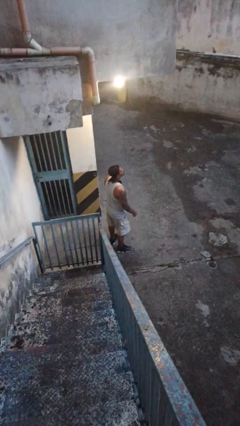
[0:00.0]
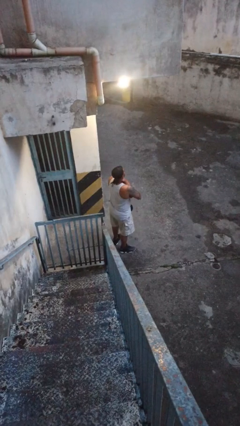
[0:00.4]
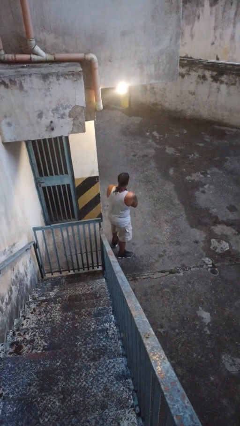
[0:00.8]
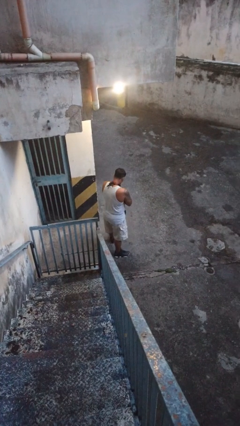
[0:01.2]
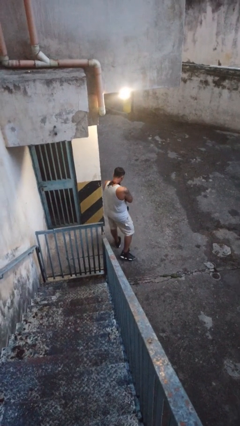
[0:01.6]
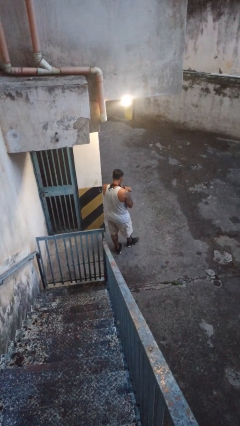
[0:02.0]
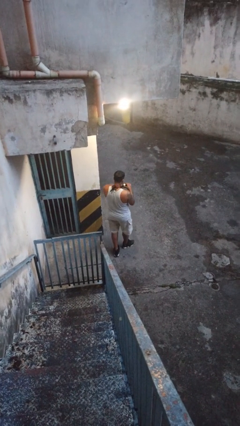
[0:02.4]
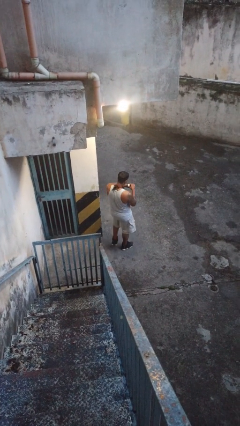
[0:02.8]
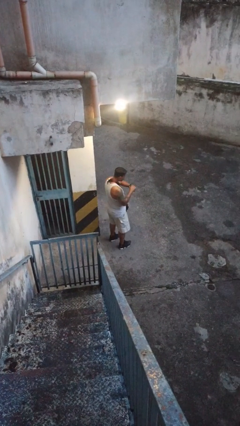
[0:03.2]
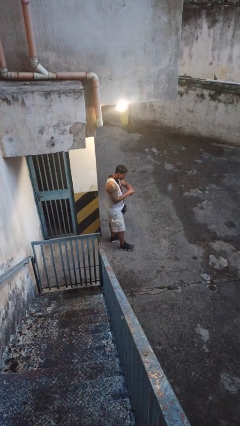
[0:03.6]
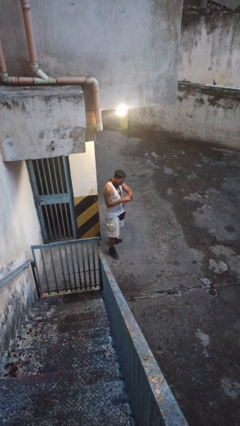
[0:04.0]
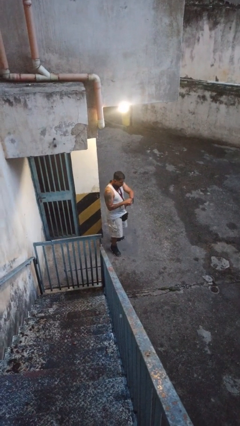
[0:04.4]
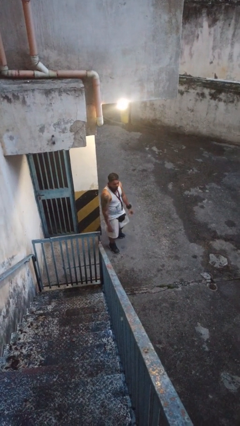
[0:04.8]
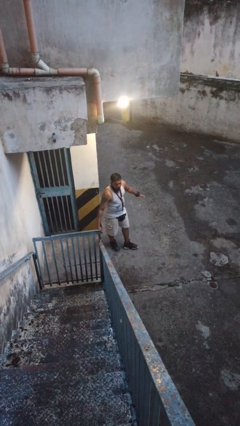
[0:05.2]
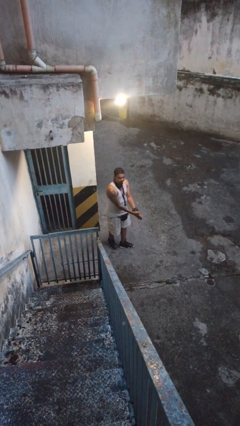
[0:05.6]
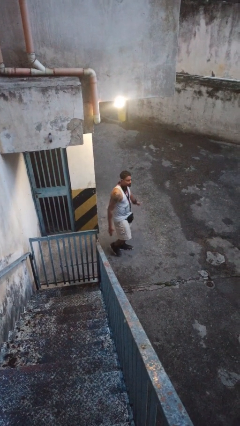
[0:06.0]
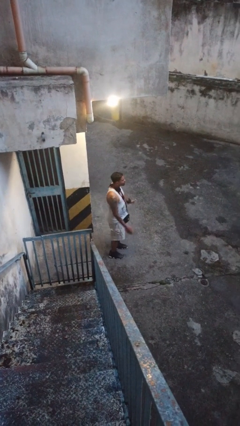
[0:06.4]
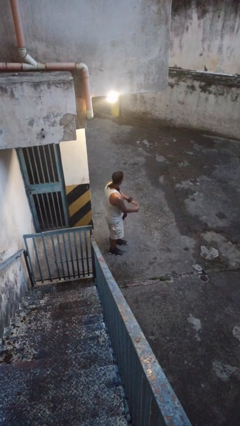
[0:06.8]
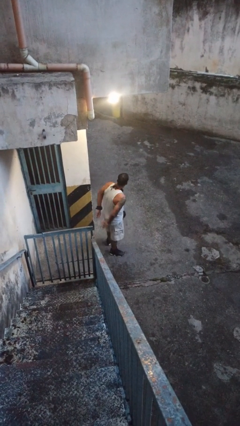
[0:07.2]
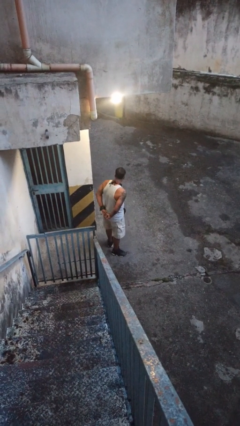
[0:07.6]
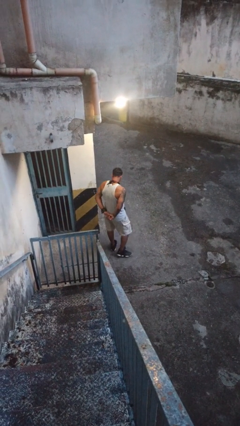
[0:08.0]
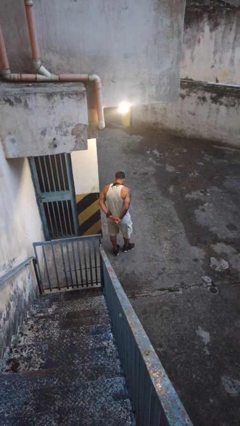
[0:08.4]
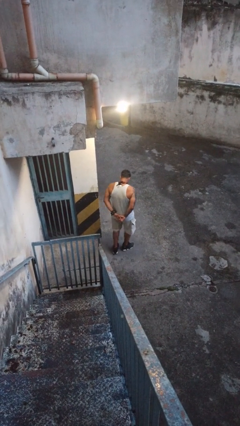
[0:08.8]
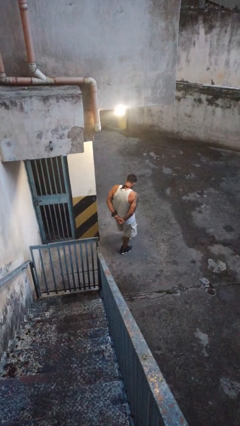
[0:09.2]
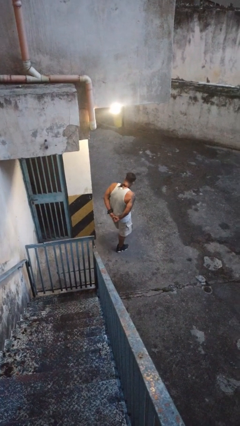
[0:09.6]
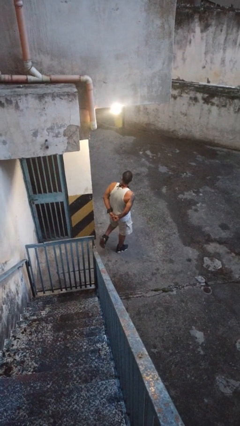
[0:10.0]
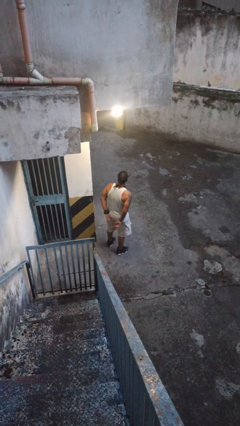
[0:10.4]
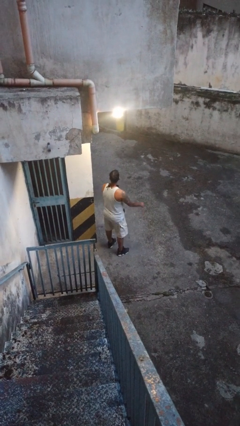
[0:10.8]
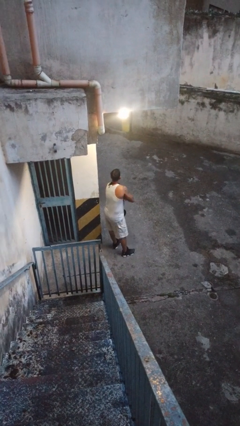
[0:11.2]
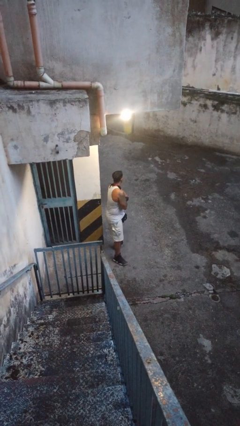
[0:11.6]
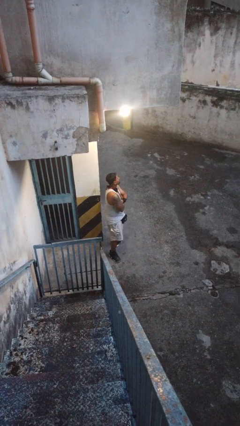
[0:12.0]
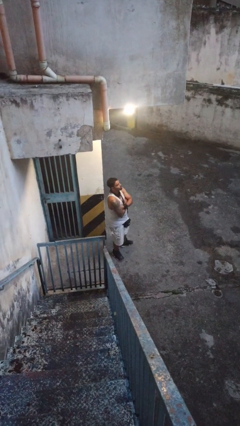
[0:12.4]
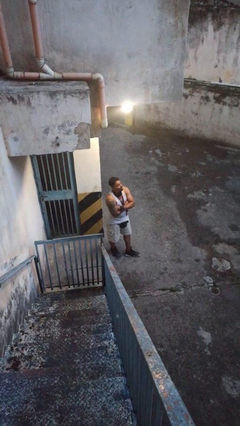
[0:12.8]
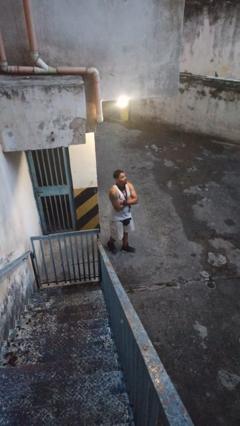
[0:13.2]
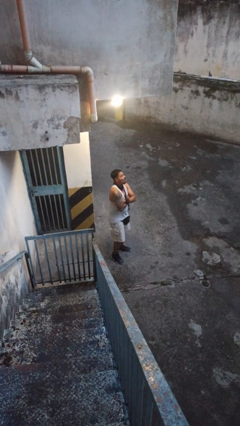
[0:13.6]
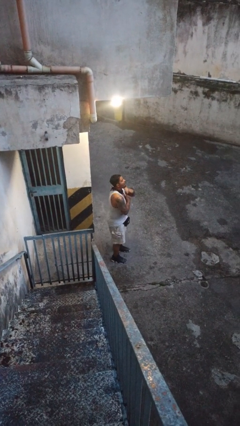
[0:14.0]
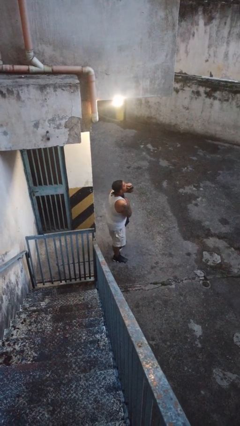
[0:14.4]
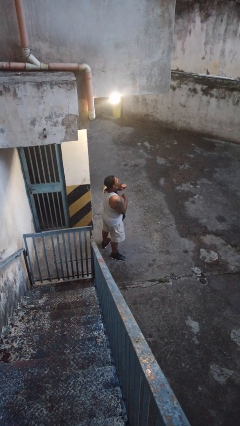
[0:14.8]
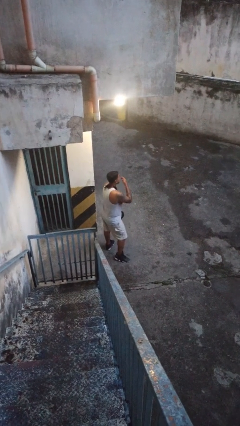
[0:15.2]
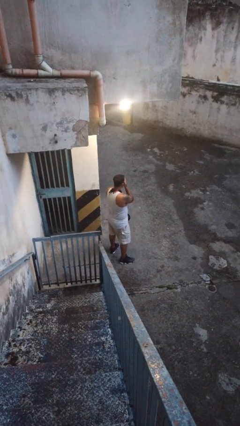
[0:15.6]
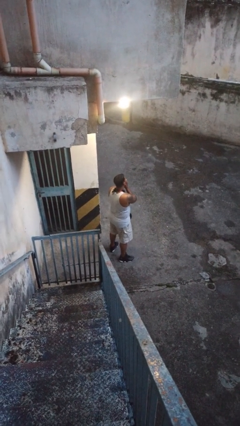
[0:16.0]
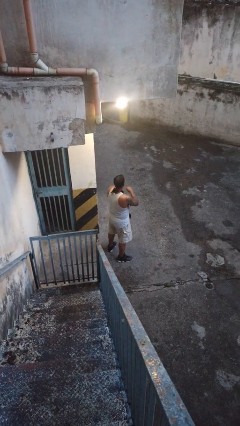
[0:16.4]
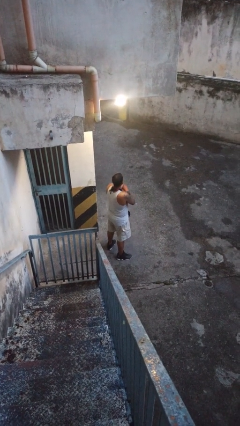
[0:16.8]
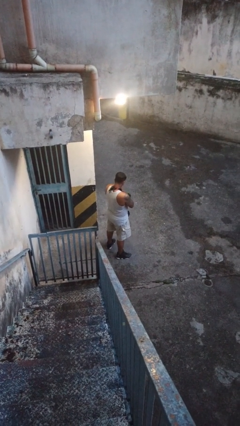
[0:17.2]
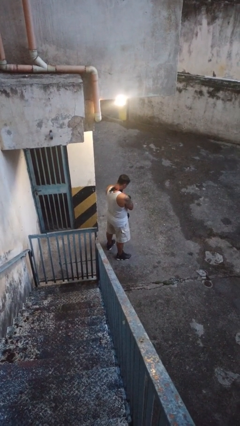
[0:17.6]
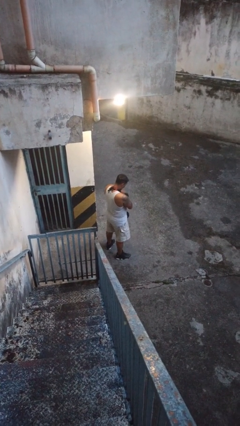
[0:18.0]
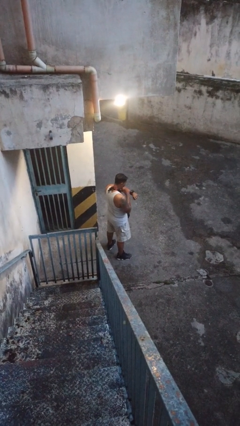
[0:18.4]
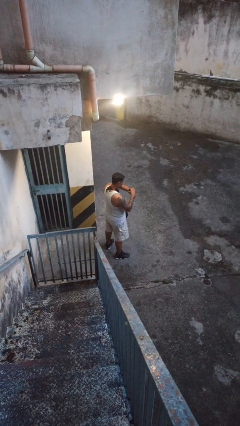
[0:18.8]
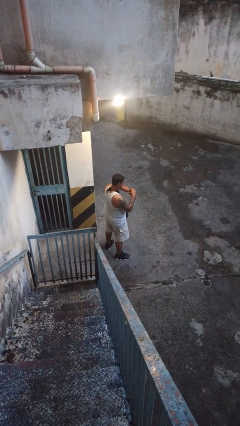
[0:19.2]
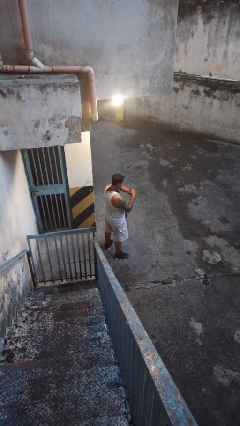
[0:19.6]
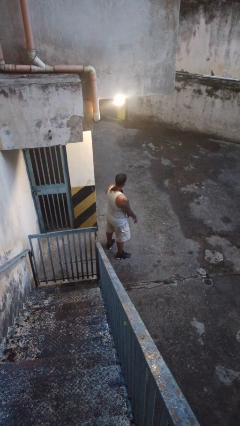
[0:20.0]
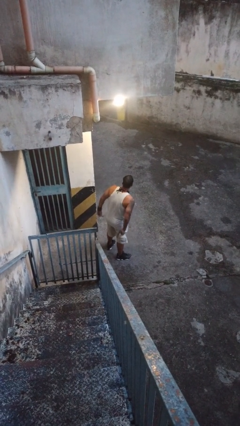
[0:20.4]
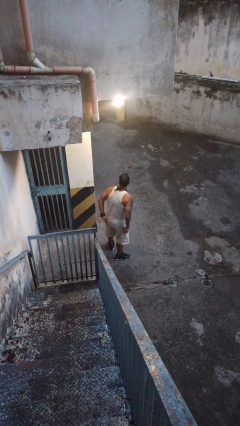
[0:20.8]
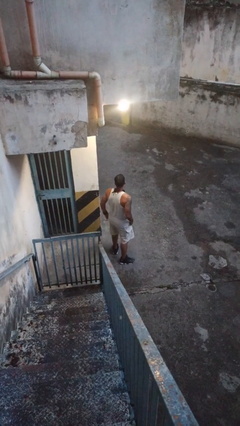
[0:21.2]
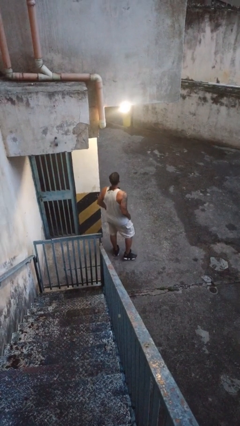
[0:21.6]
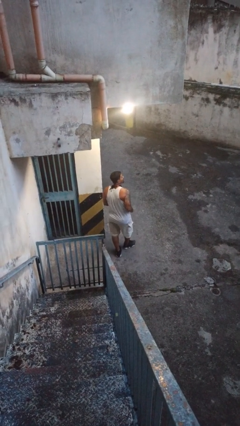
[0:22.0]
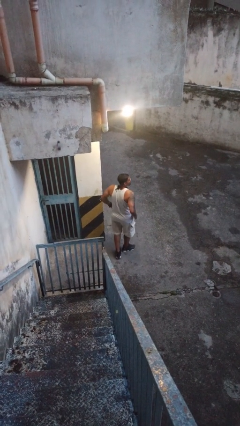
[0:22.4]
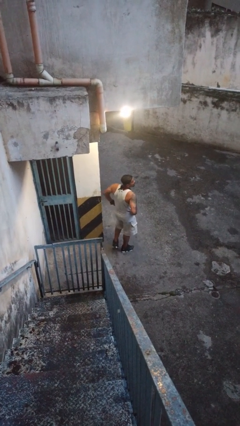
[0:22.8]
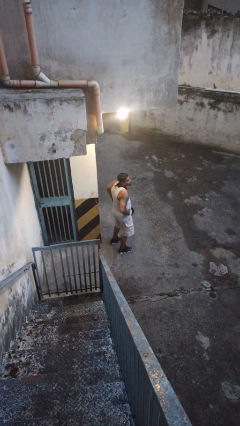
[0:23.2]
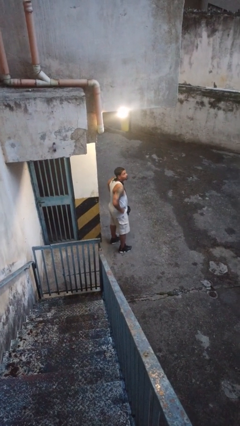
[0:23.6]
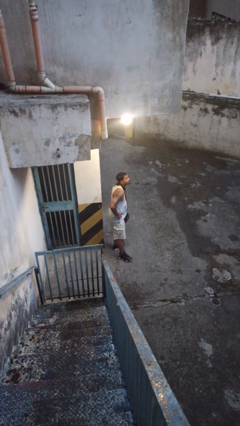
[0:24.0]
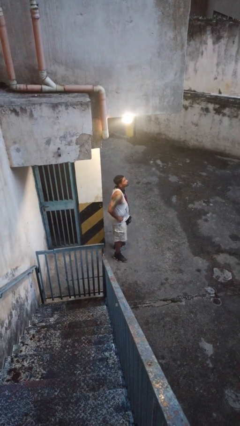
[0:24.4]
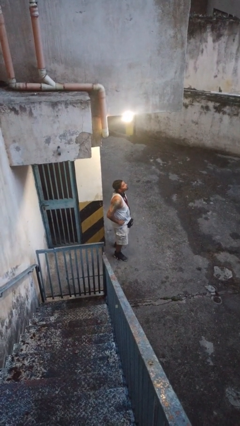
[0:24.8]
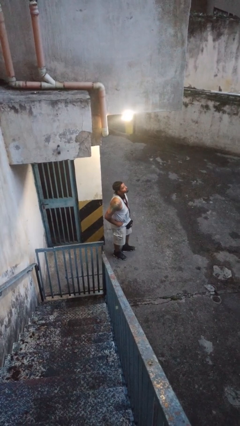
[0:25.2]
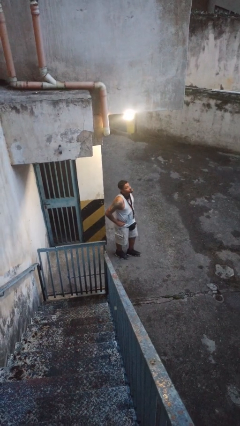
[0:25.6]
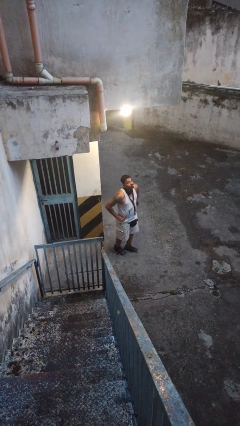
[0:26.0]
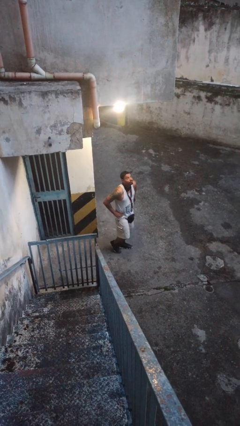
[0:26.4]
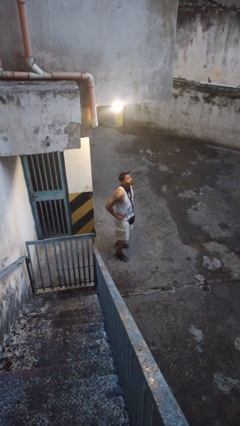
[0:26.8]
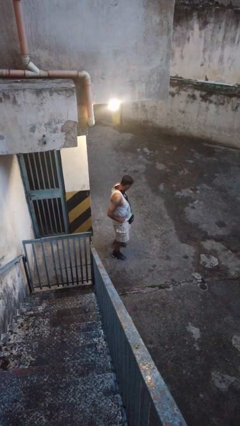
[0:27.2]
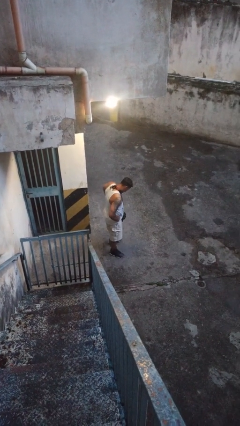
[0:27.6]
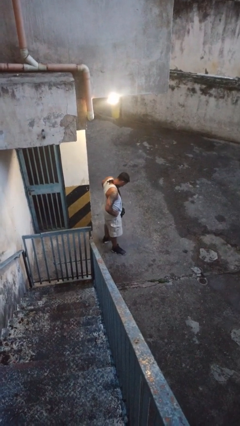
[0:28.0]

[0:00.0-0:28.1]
person walks

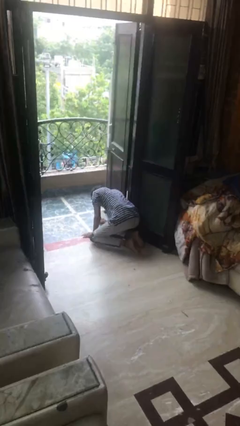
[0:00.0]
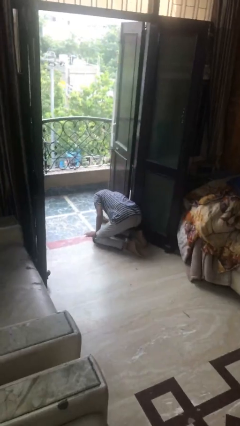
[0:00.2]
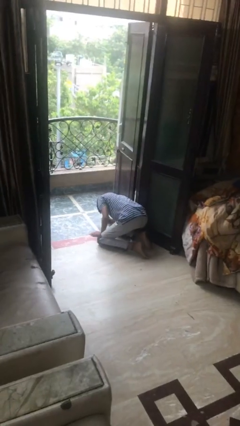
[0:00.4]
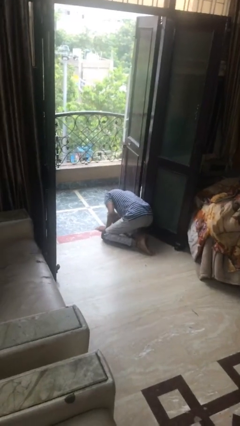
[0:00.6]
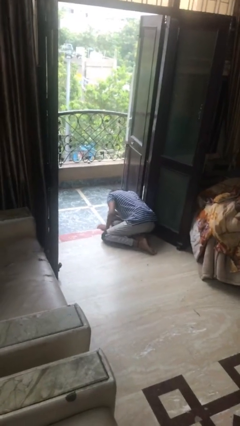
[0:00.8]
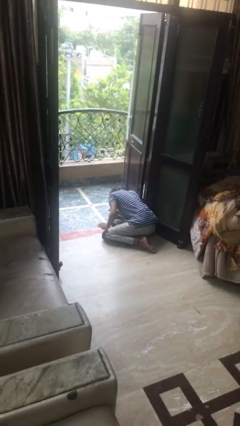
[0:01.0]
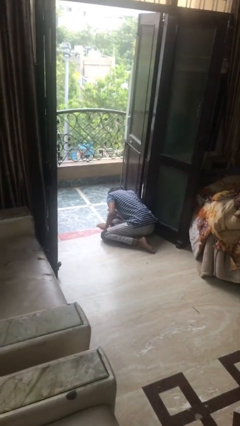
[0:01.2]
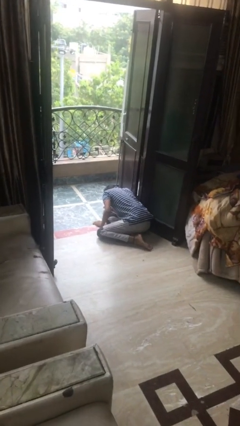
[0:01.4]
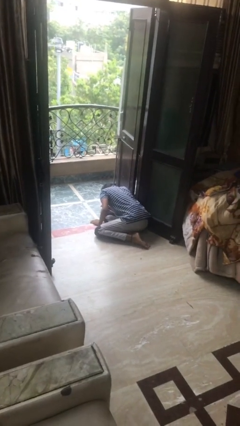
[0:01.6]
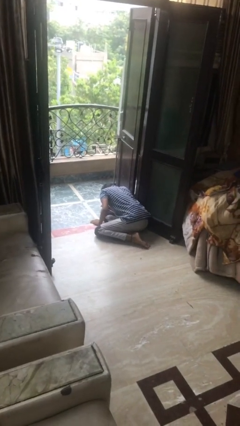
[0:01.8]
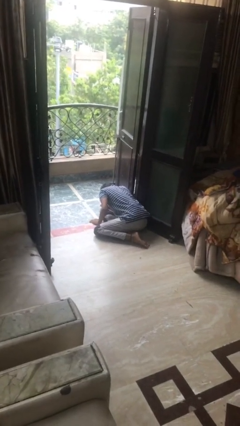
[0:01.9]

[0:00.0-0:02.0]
person lies down on floor

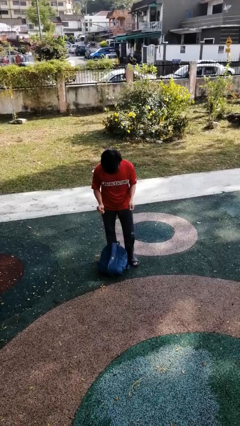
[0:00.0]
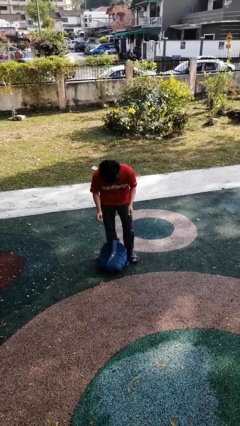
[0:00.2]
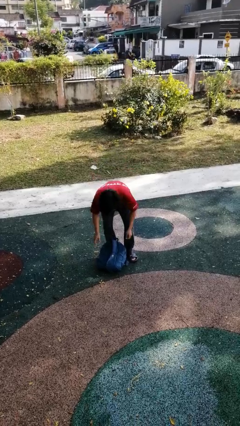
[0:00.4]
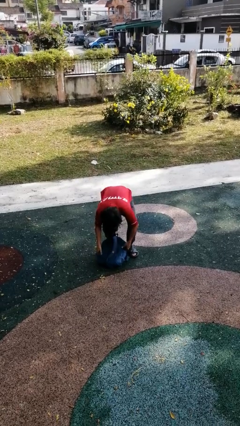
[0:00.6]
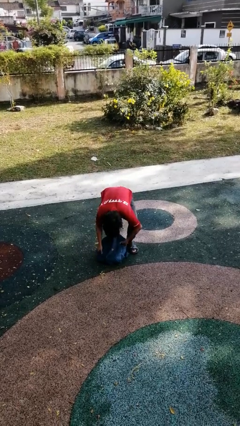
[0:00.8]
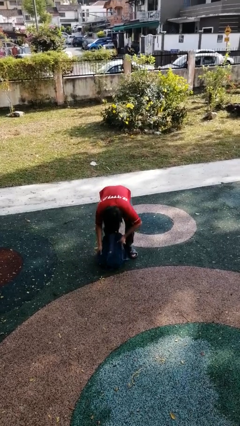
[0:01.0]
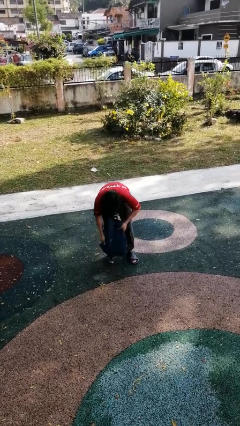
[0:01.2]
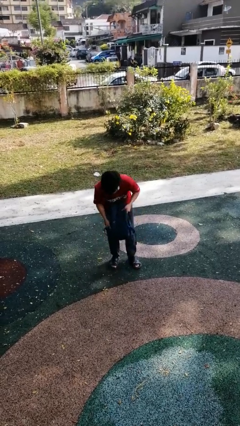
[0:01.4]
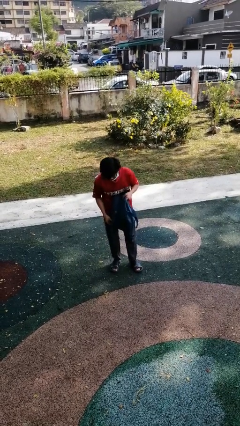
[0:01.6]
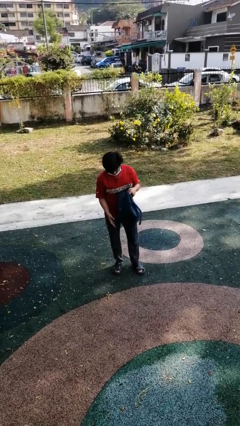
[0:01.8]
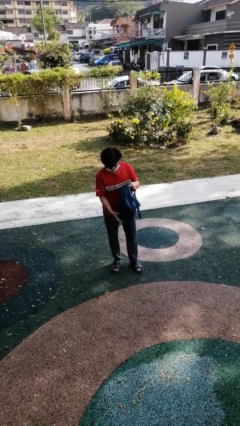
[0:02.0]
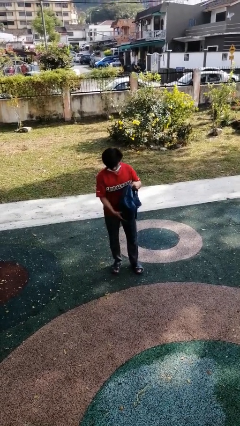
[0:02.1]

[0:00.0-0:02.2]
person picks up object from floor
